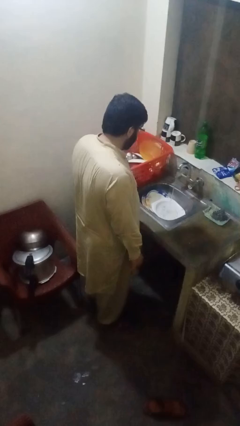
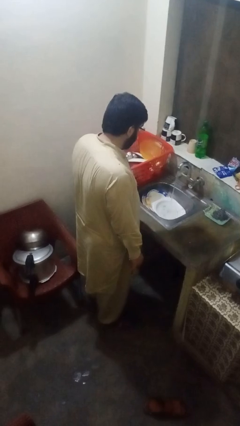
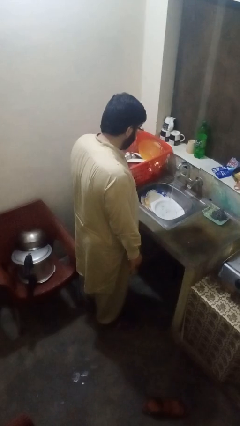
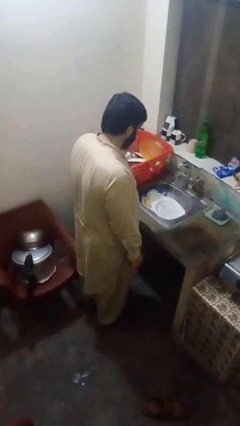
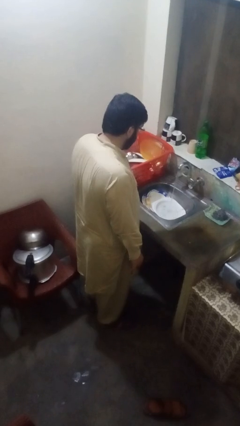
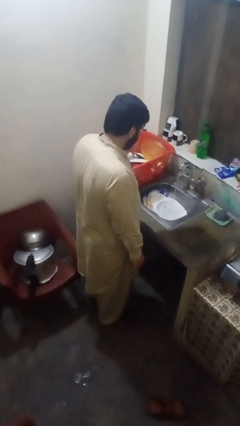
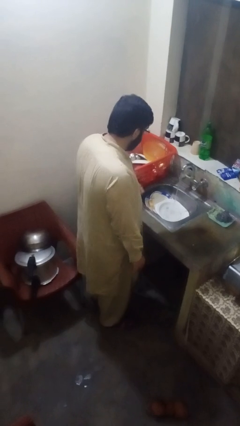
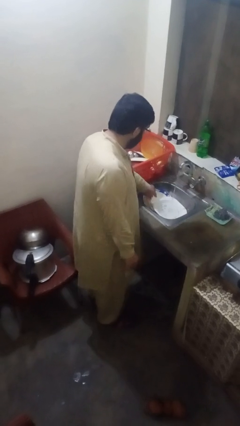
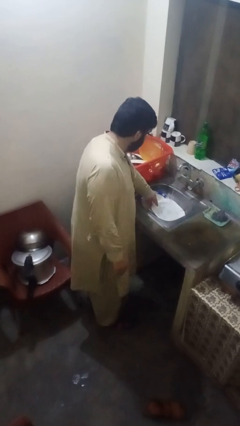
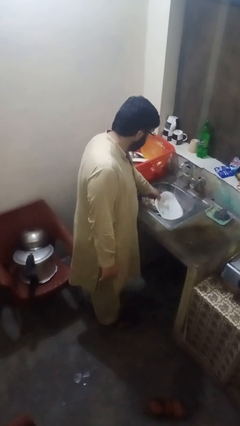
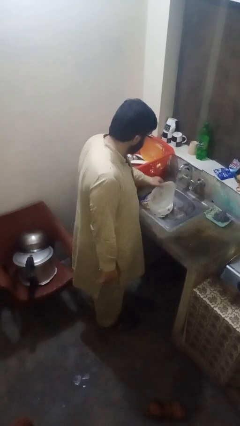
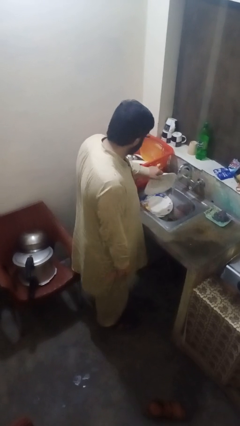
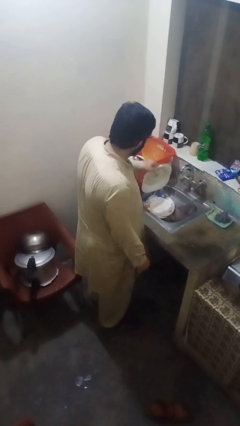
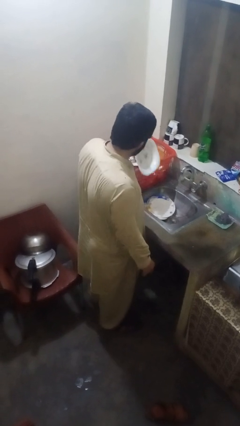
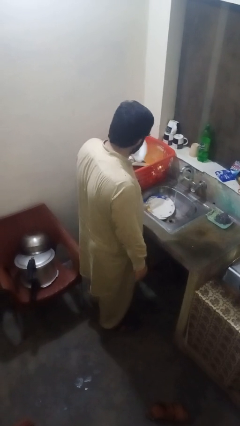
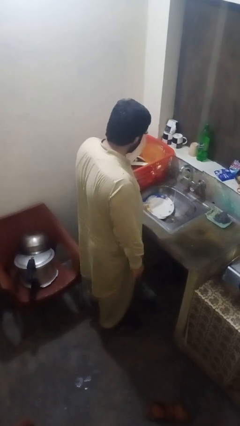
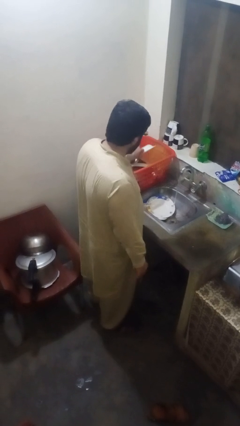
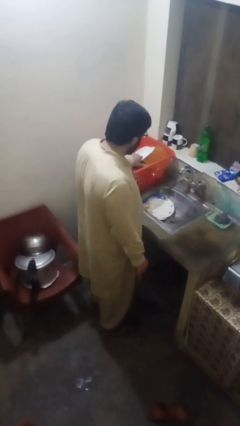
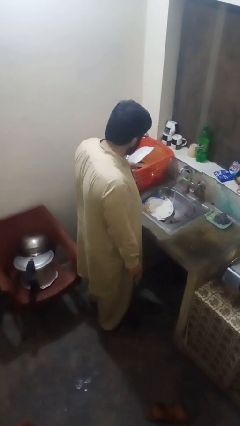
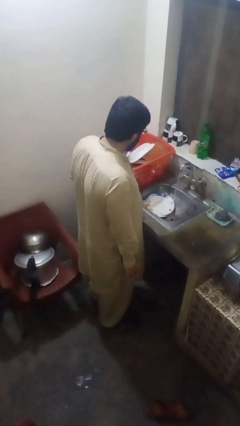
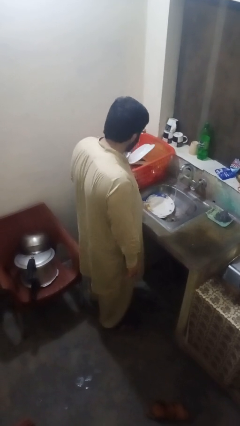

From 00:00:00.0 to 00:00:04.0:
person loads dishwasher

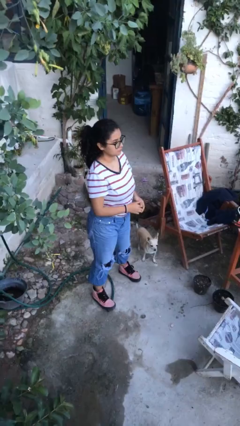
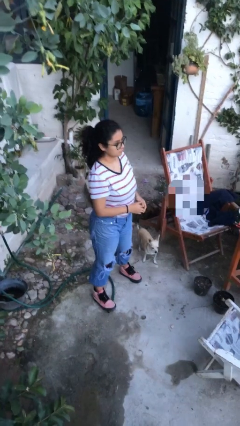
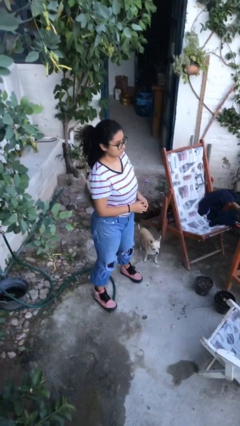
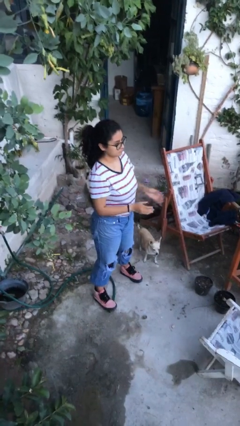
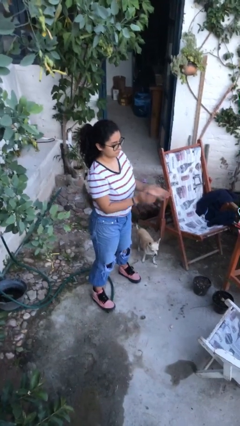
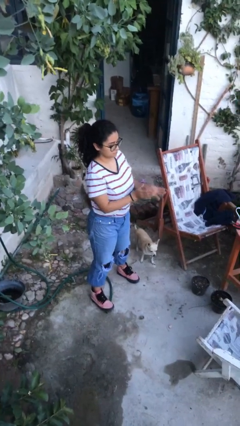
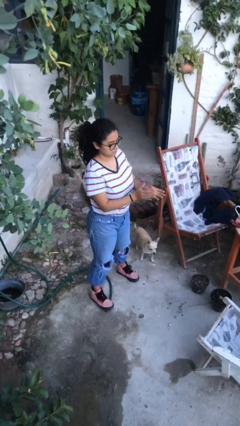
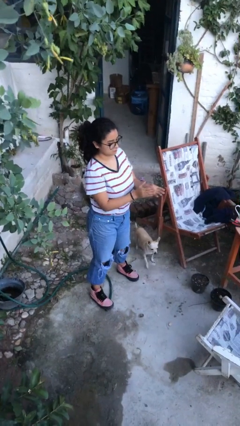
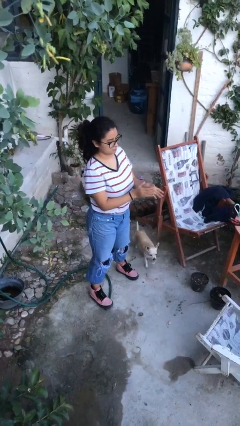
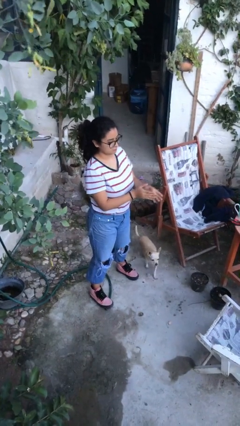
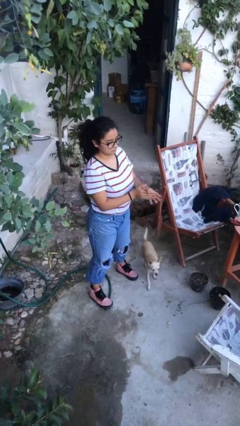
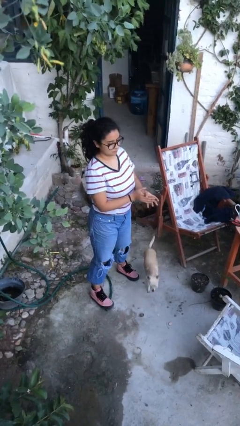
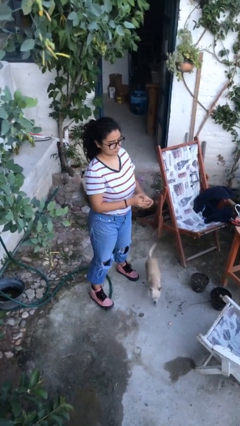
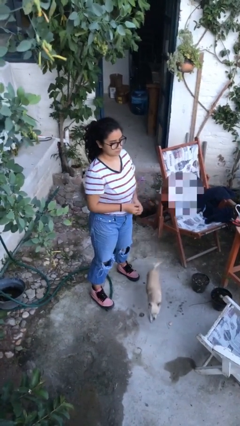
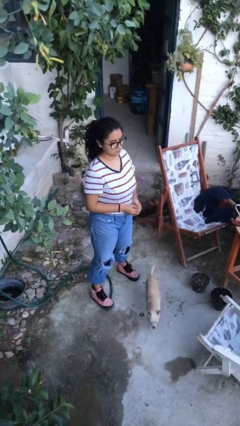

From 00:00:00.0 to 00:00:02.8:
person claps hands

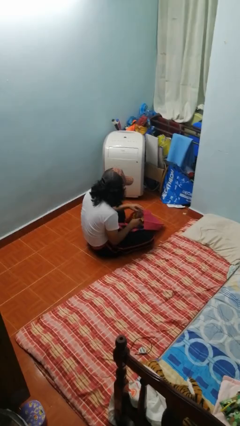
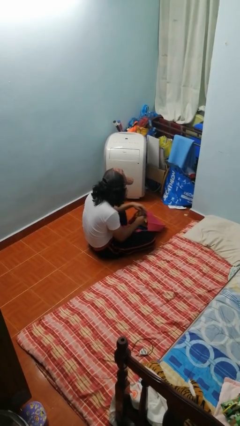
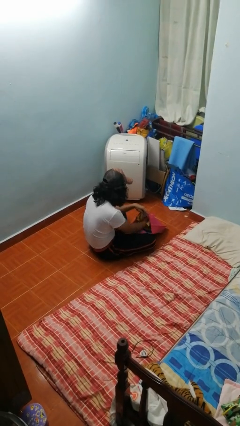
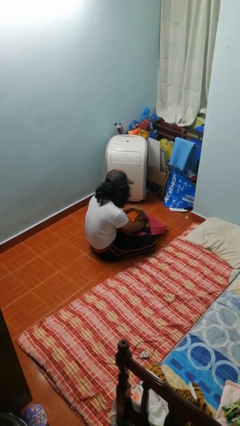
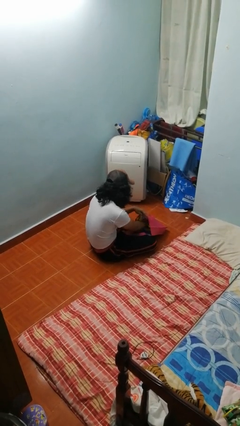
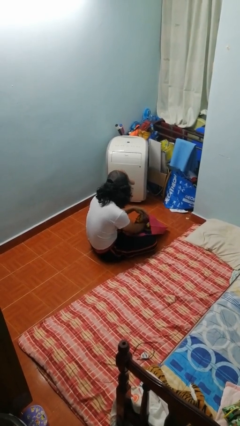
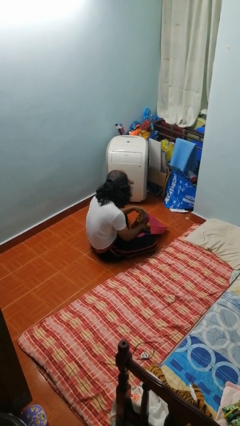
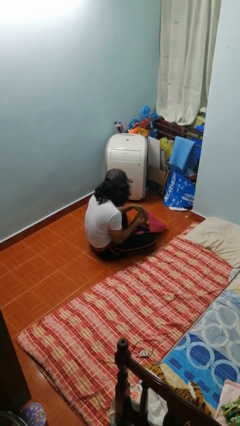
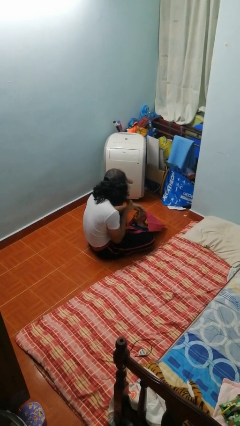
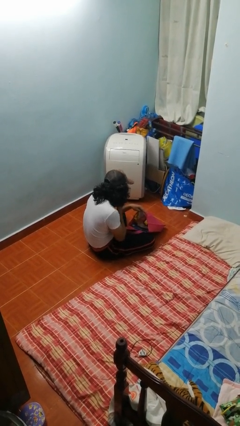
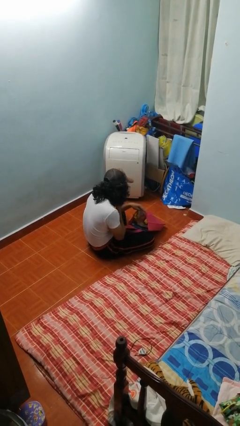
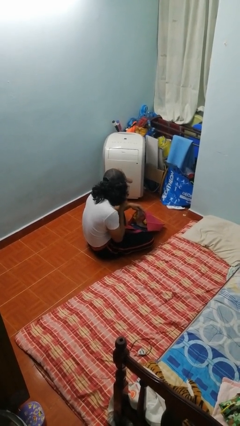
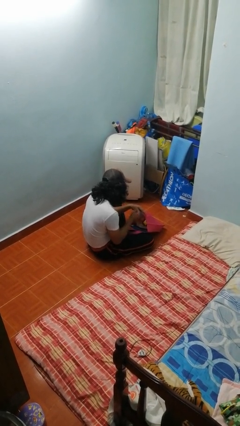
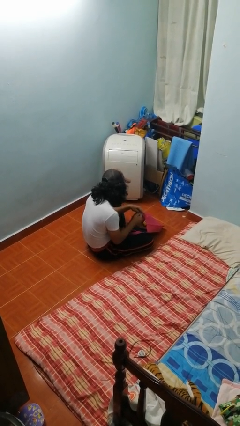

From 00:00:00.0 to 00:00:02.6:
person eats snack from bag

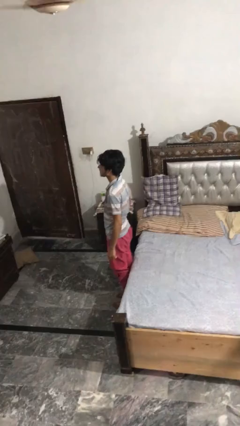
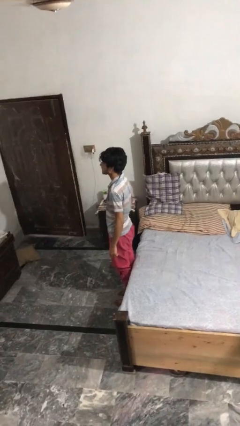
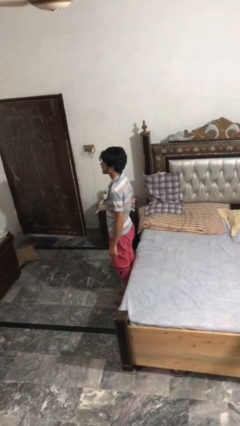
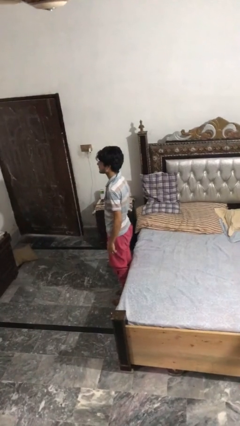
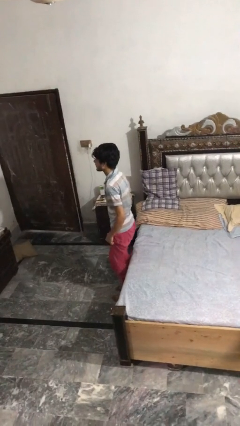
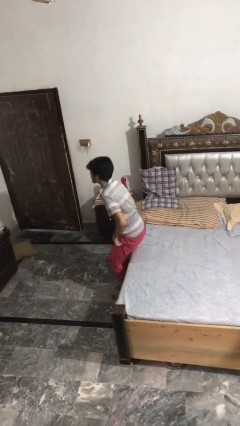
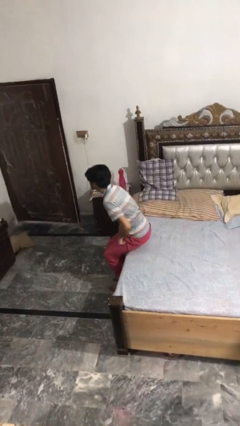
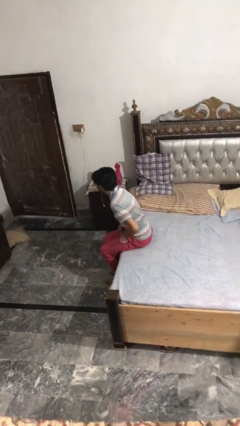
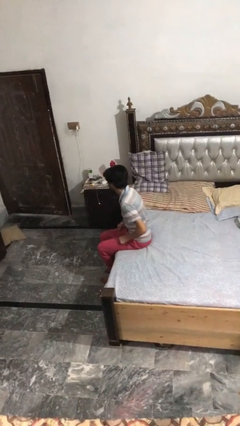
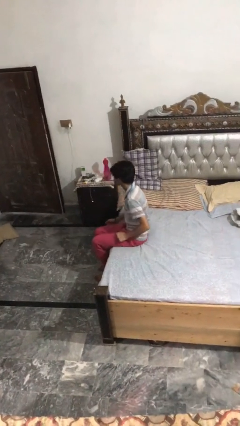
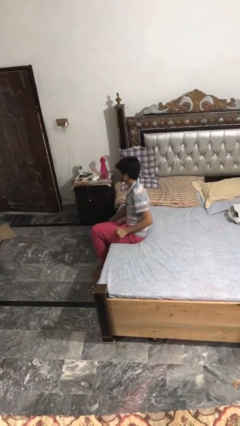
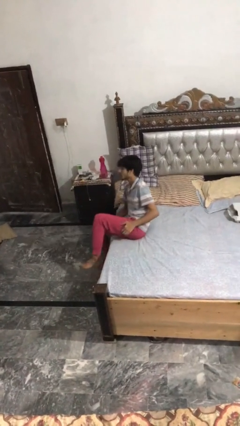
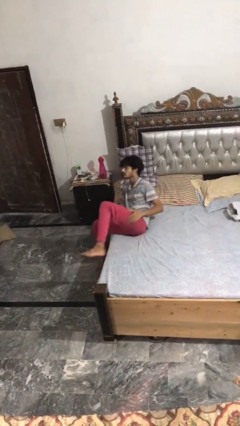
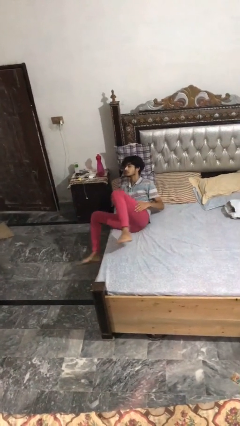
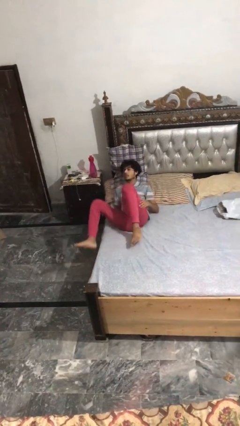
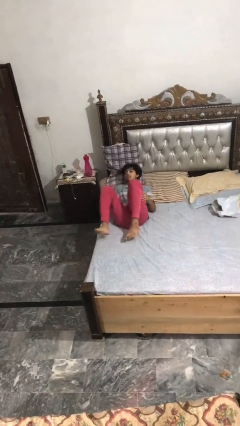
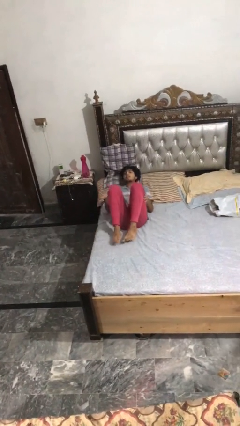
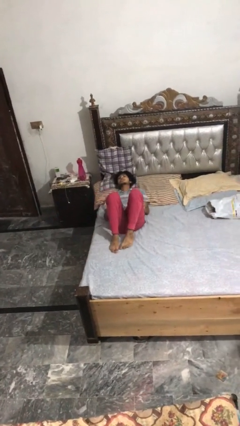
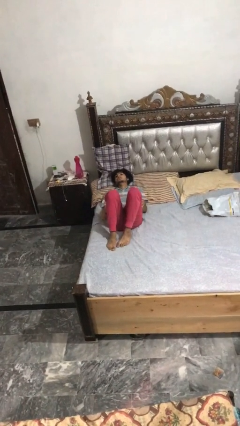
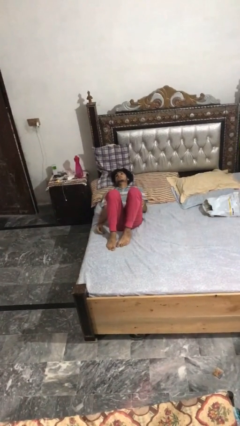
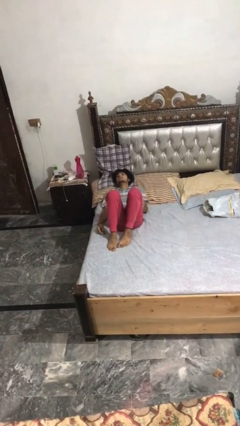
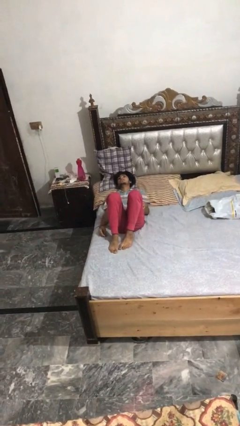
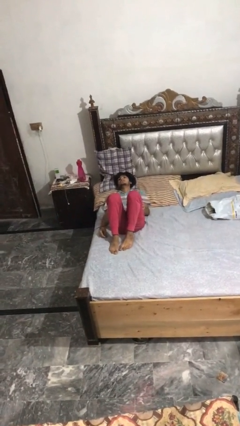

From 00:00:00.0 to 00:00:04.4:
person lies down on bed

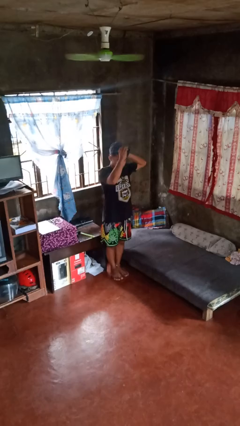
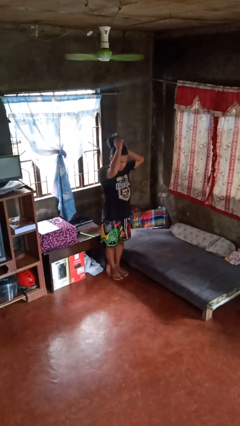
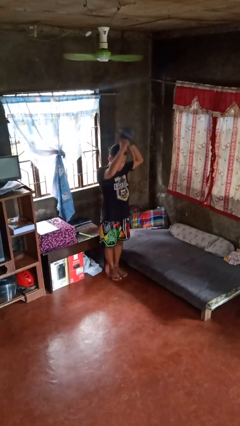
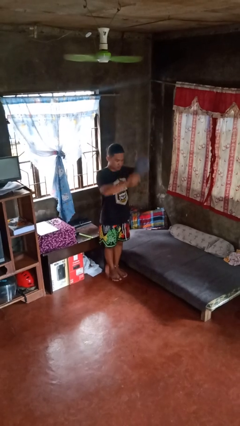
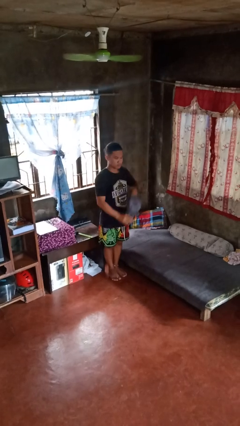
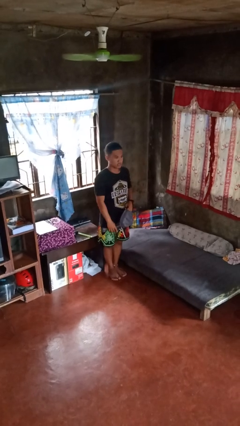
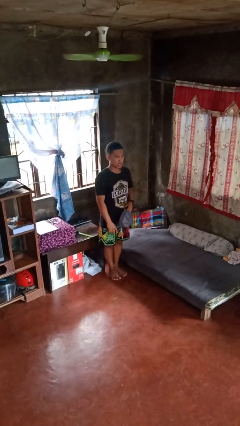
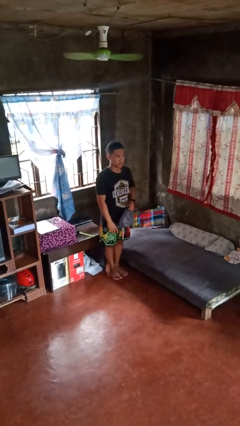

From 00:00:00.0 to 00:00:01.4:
person takes off hat

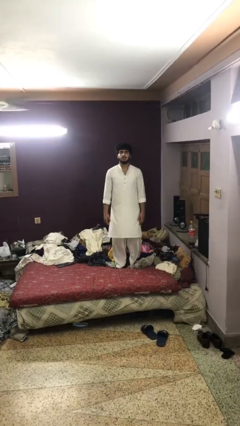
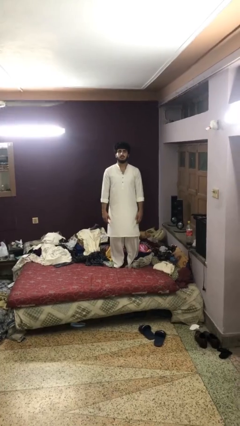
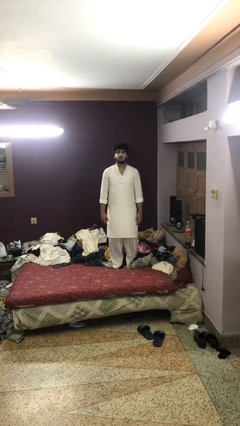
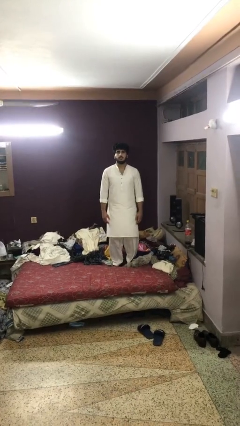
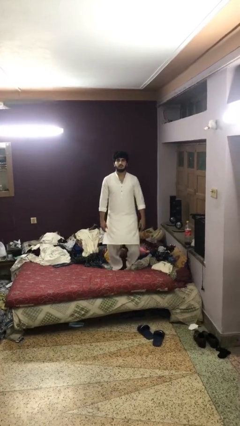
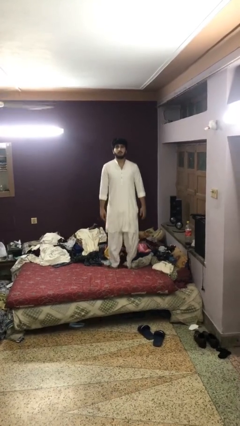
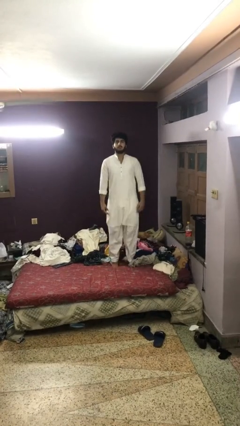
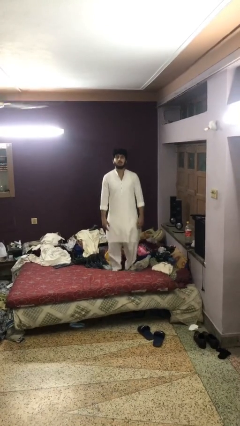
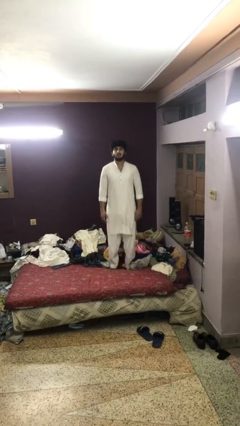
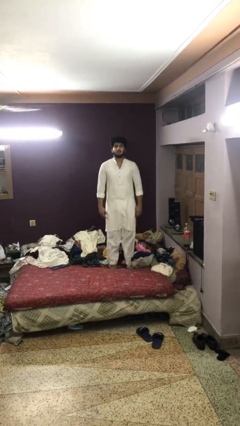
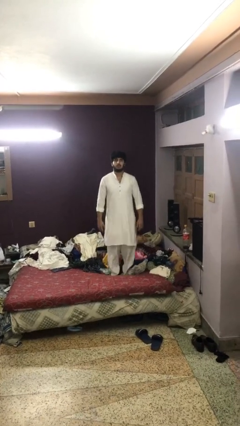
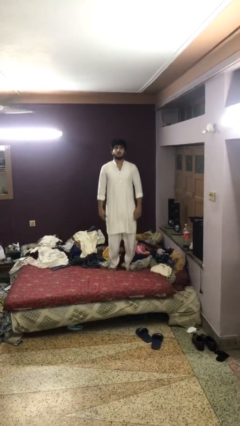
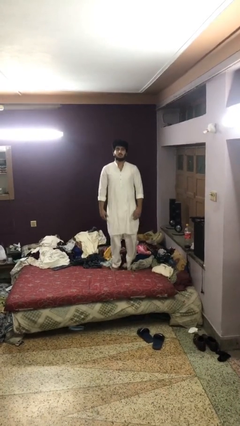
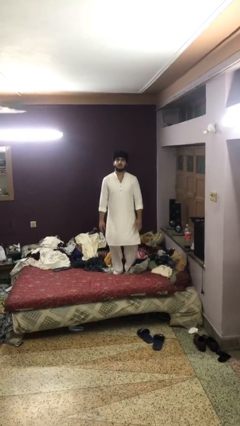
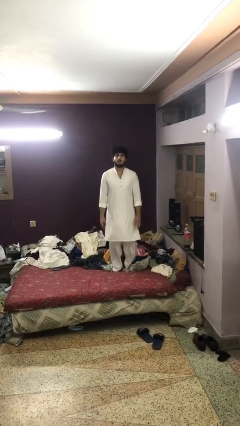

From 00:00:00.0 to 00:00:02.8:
person jumps on bed
